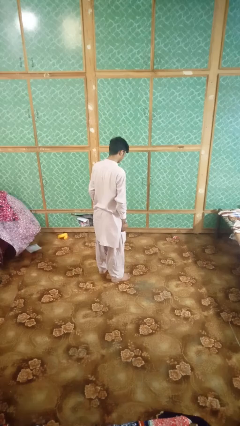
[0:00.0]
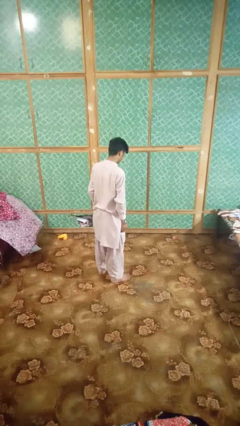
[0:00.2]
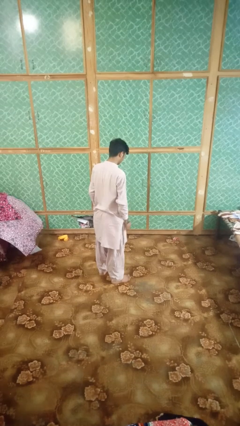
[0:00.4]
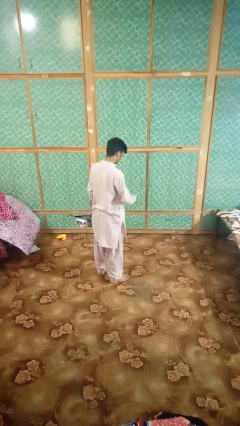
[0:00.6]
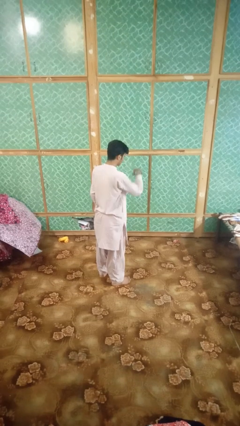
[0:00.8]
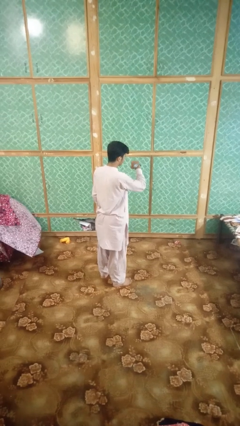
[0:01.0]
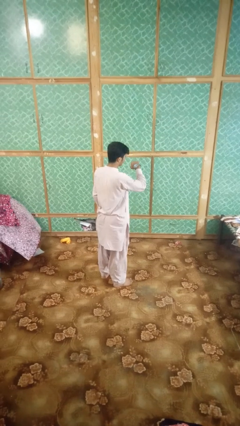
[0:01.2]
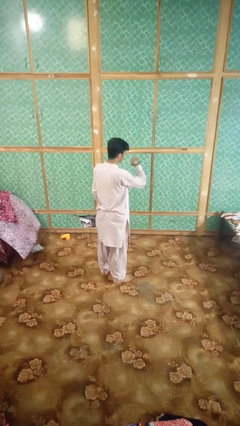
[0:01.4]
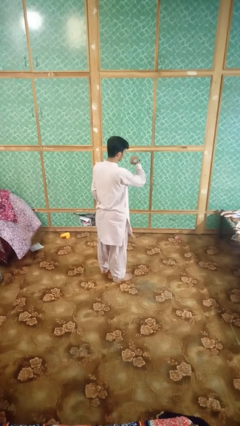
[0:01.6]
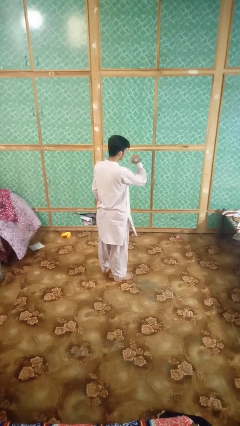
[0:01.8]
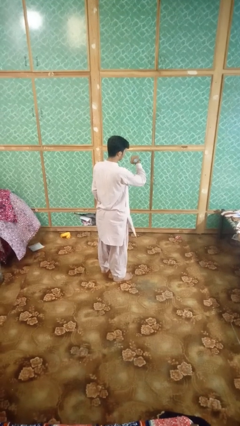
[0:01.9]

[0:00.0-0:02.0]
person looks at wristwatch

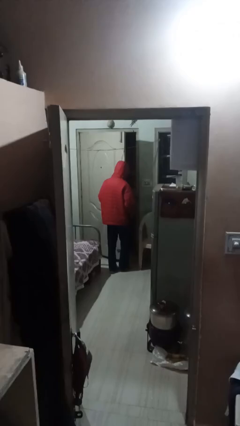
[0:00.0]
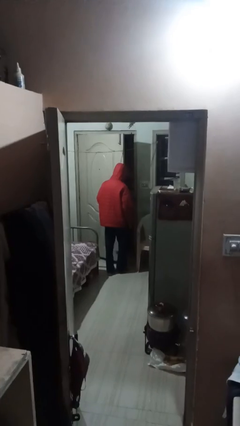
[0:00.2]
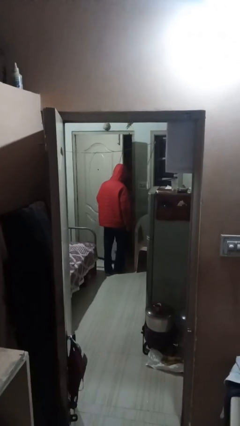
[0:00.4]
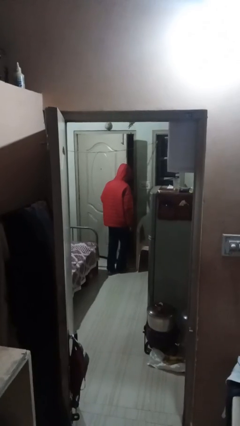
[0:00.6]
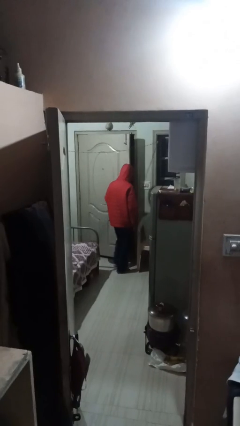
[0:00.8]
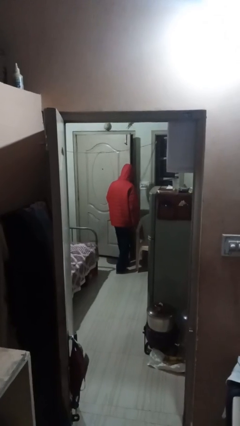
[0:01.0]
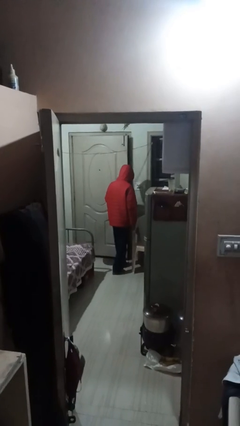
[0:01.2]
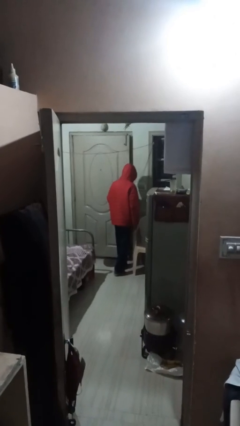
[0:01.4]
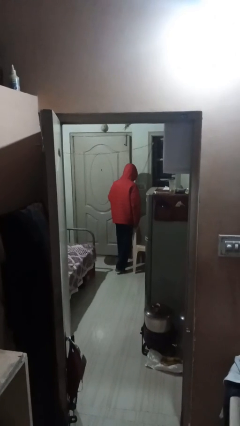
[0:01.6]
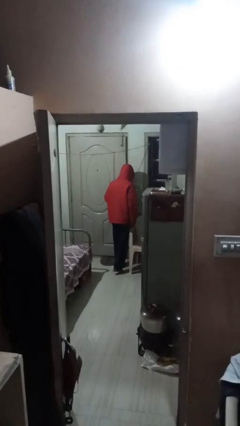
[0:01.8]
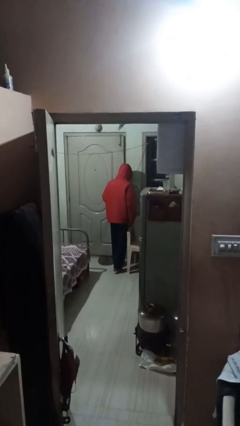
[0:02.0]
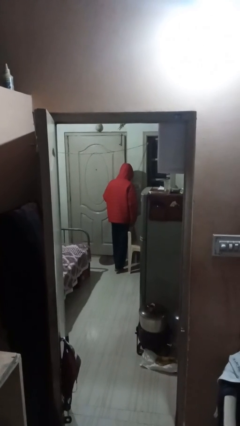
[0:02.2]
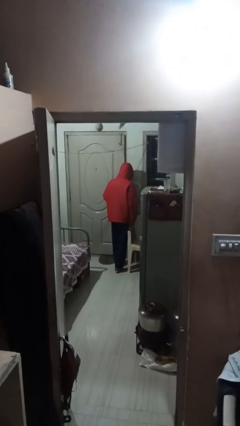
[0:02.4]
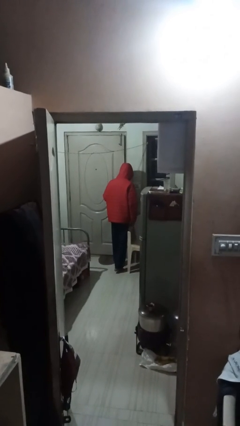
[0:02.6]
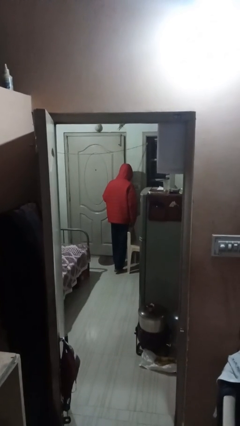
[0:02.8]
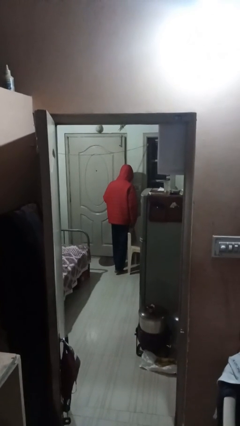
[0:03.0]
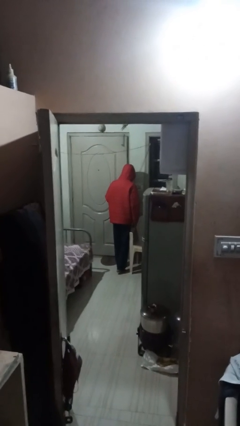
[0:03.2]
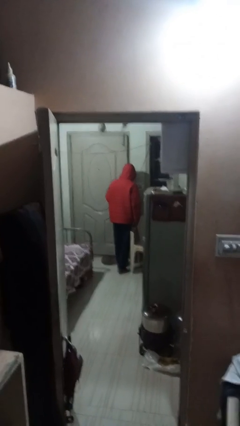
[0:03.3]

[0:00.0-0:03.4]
person closes facility door

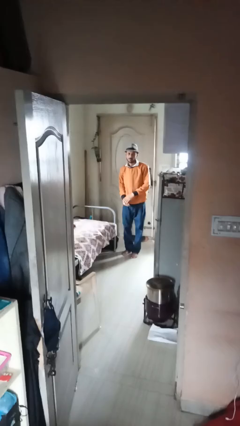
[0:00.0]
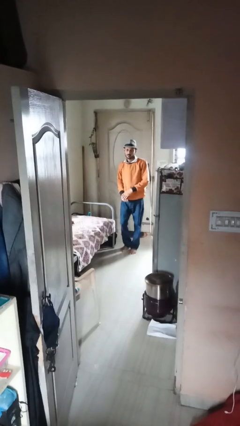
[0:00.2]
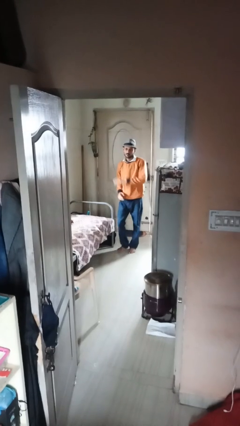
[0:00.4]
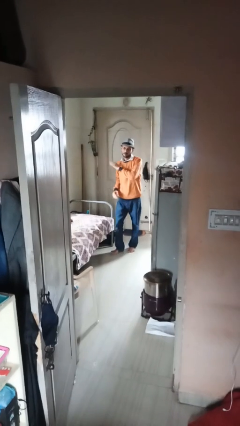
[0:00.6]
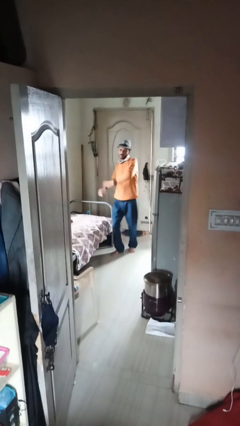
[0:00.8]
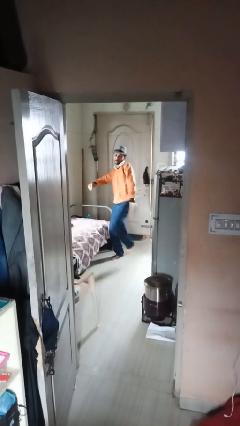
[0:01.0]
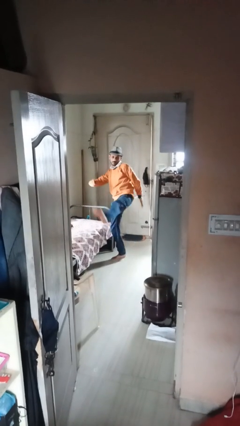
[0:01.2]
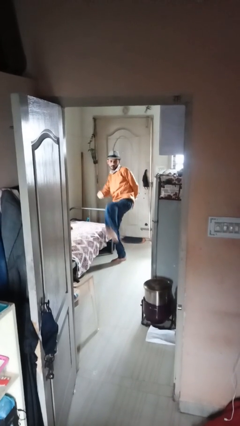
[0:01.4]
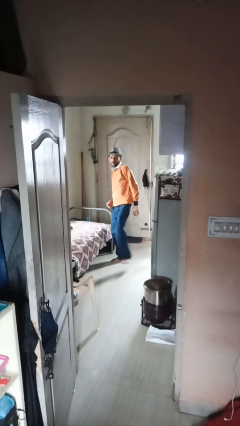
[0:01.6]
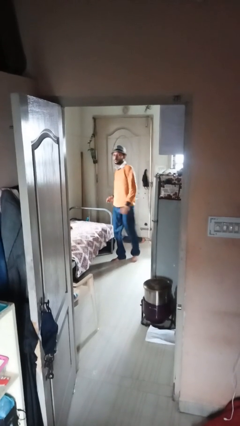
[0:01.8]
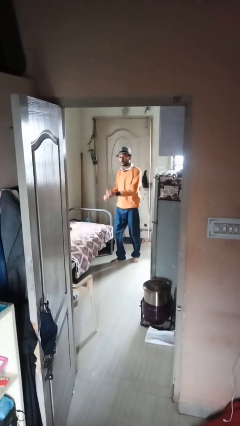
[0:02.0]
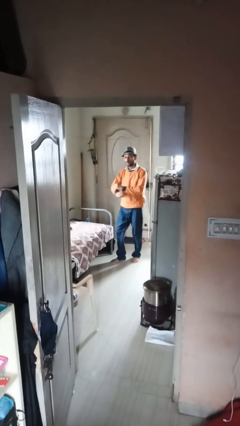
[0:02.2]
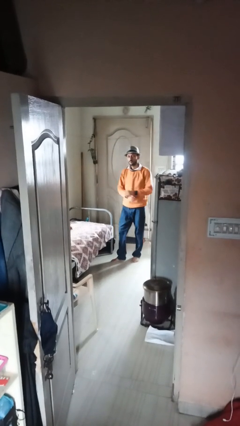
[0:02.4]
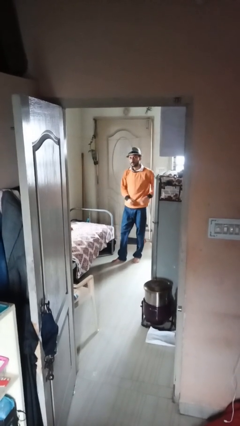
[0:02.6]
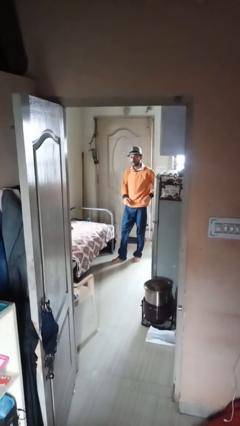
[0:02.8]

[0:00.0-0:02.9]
person karate kicks

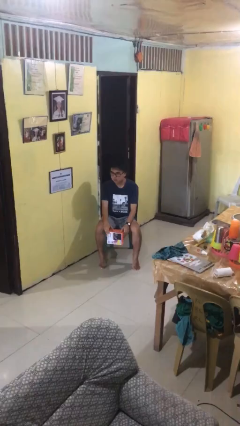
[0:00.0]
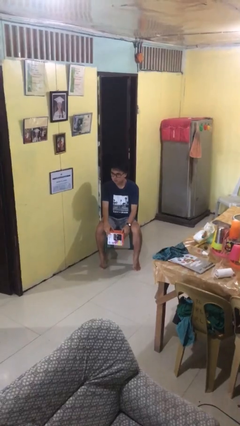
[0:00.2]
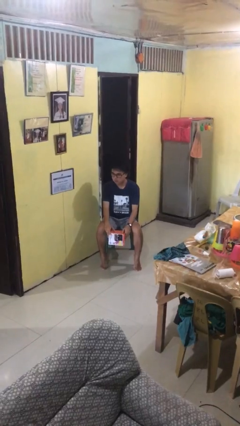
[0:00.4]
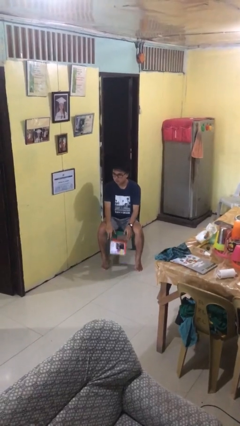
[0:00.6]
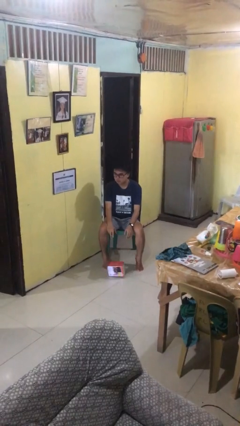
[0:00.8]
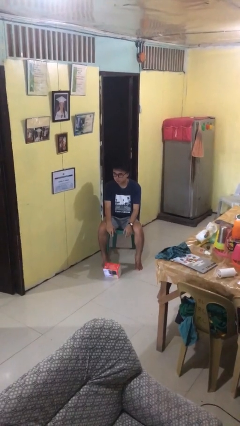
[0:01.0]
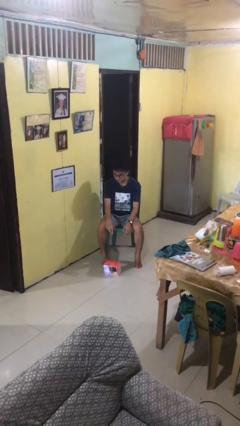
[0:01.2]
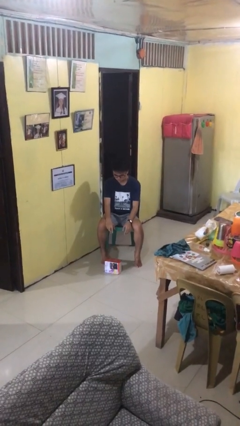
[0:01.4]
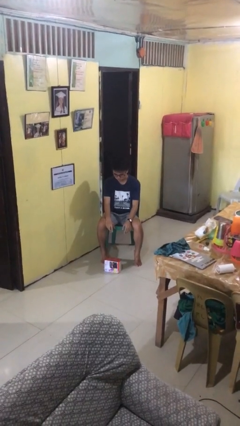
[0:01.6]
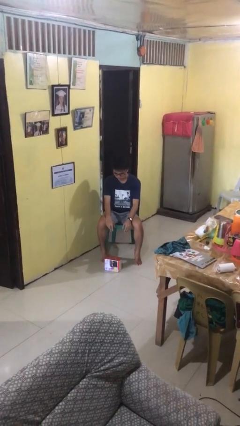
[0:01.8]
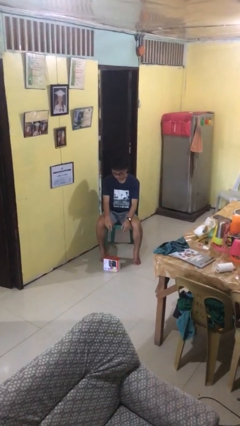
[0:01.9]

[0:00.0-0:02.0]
person drops object

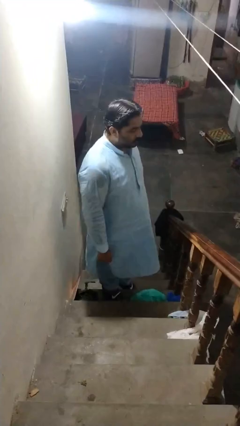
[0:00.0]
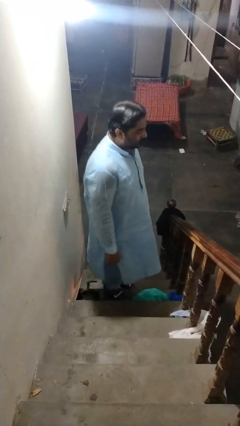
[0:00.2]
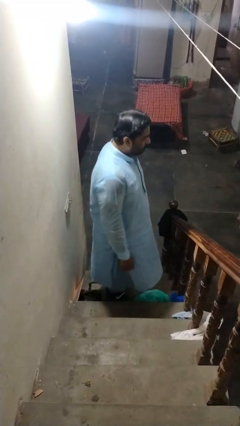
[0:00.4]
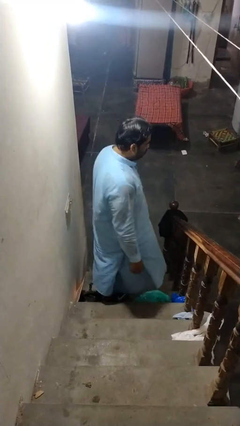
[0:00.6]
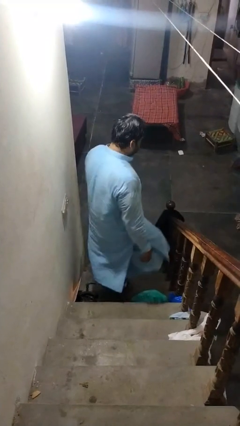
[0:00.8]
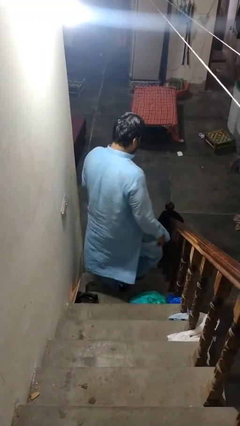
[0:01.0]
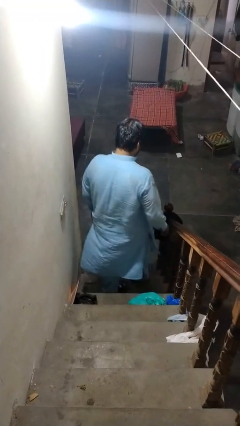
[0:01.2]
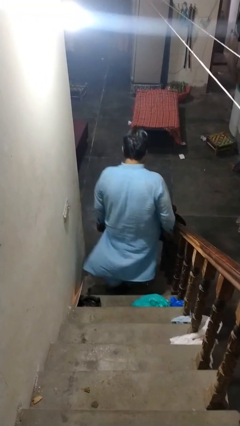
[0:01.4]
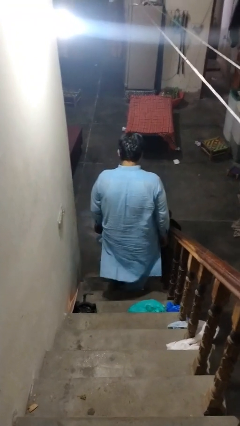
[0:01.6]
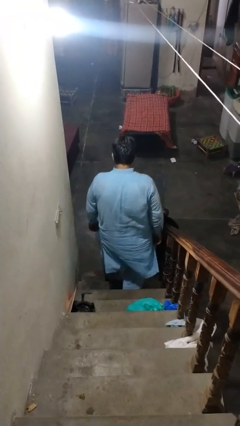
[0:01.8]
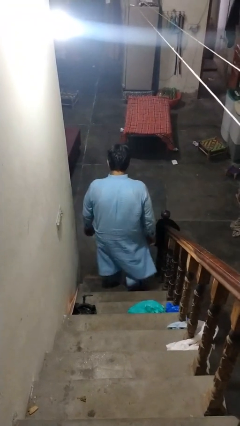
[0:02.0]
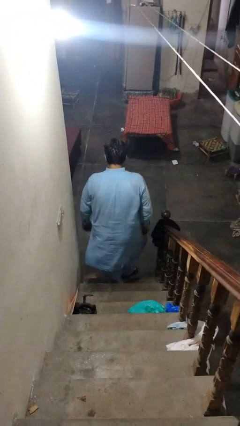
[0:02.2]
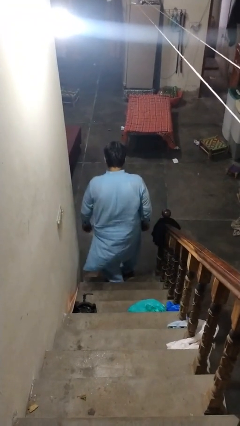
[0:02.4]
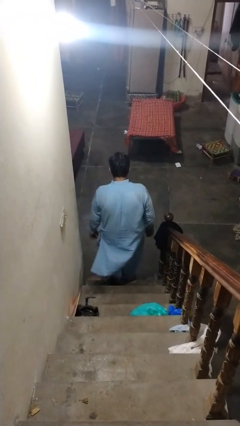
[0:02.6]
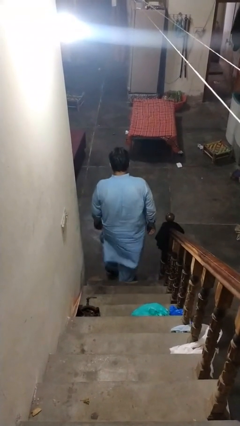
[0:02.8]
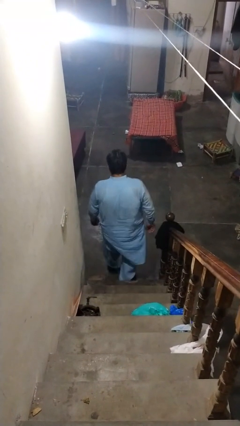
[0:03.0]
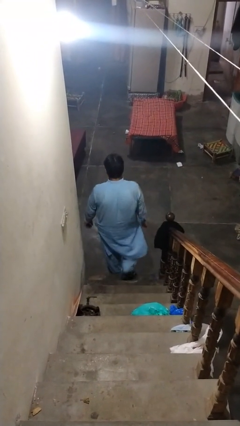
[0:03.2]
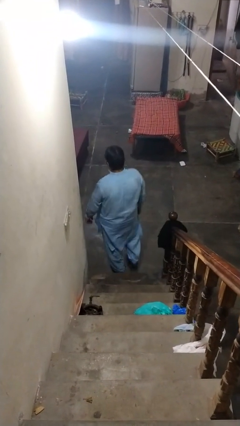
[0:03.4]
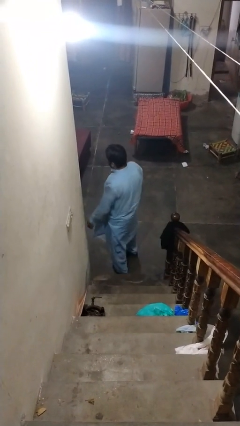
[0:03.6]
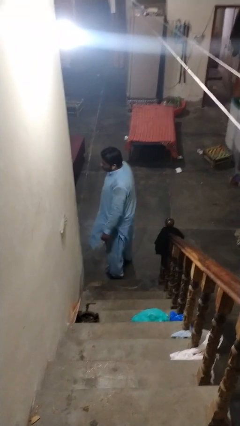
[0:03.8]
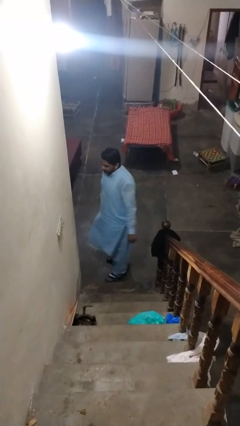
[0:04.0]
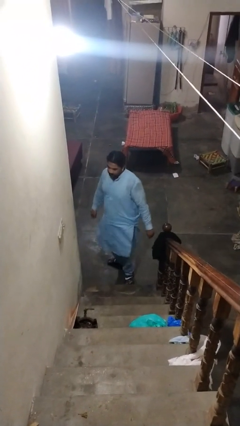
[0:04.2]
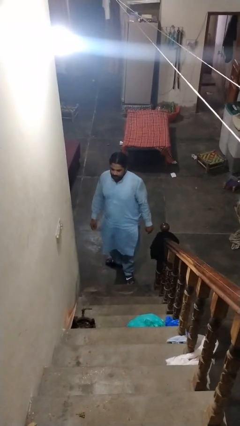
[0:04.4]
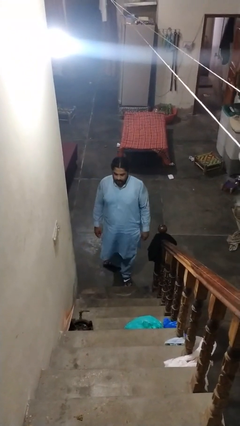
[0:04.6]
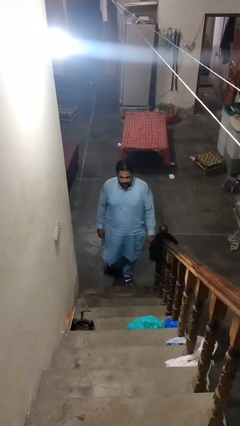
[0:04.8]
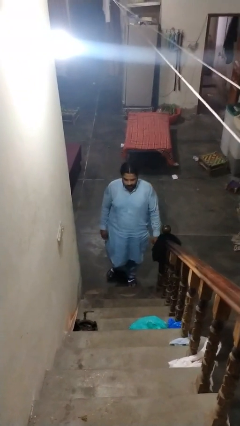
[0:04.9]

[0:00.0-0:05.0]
person climbs down stairs

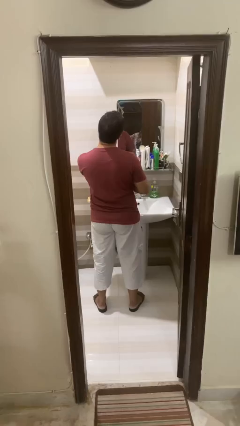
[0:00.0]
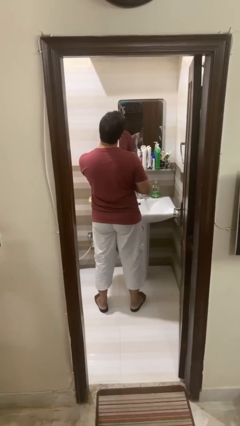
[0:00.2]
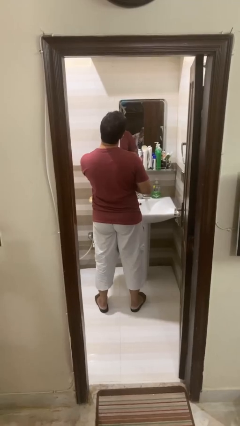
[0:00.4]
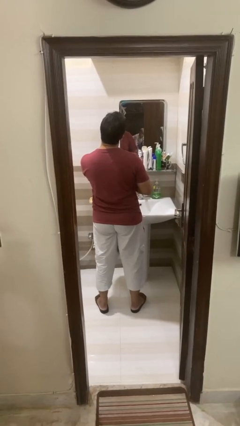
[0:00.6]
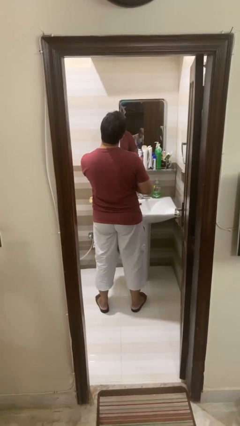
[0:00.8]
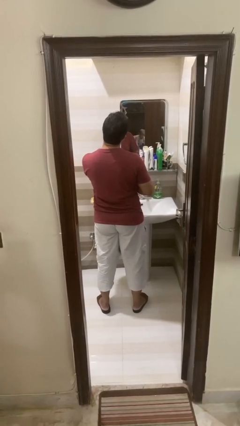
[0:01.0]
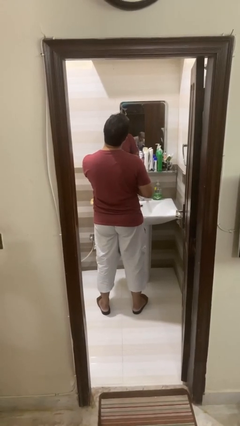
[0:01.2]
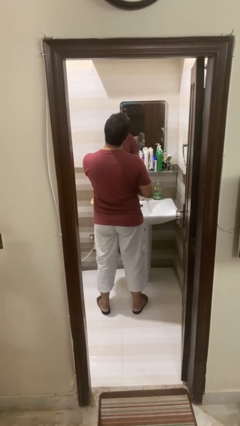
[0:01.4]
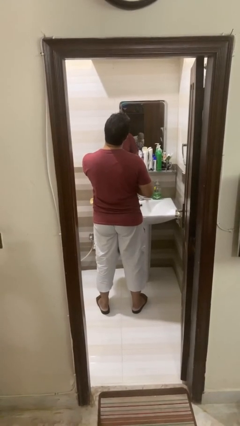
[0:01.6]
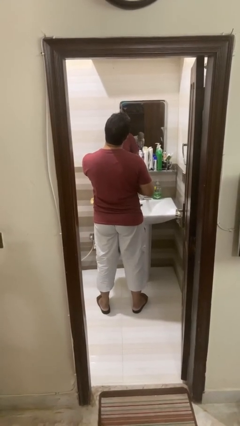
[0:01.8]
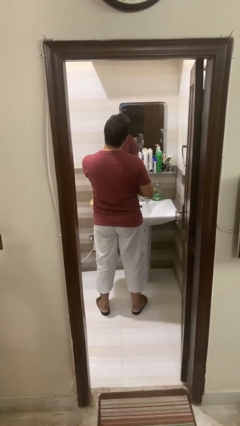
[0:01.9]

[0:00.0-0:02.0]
person applies shaving cream

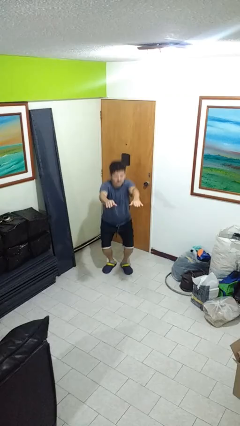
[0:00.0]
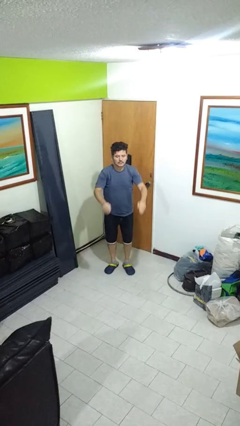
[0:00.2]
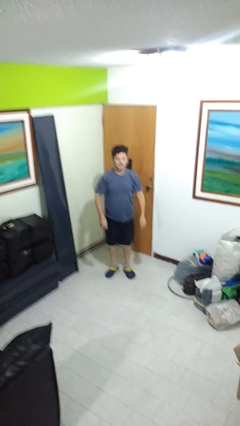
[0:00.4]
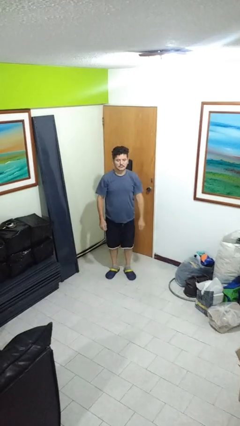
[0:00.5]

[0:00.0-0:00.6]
person stands up
